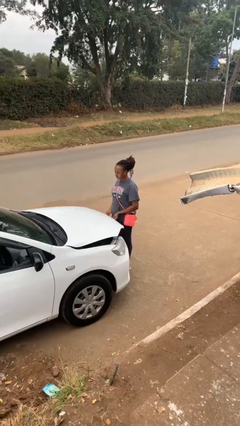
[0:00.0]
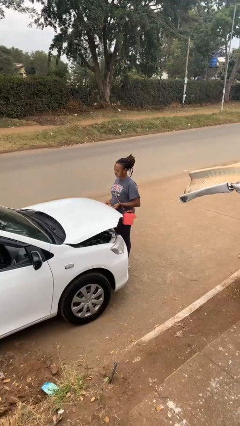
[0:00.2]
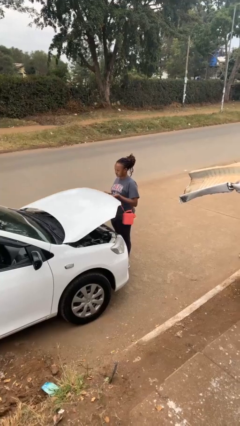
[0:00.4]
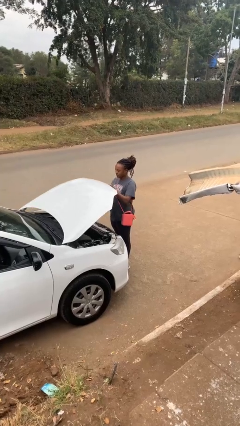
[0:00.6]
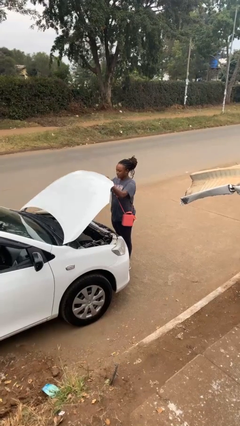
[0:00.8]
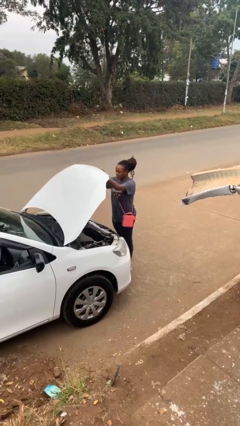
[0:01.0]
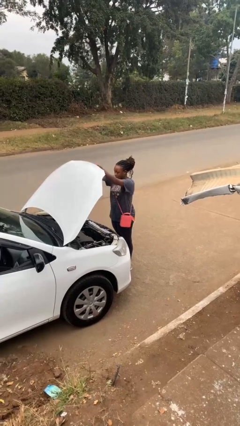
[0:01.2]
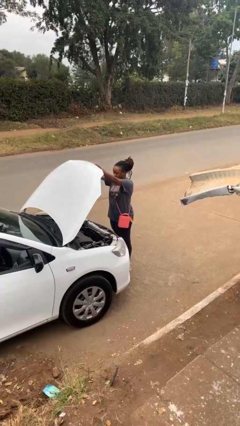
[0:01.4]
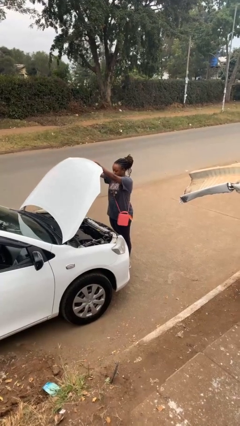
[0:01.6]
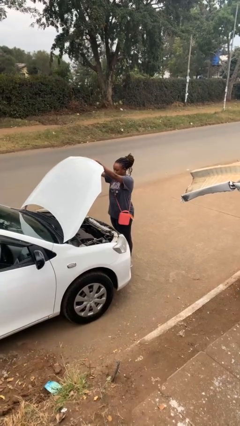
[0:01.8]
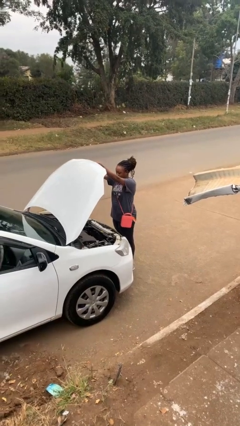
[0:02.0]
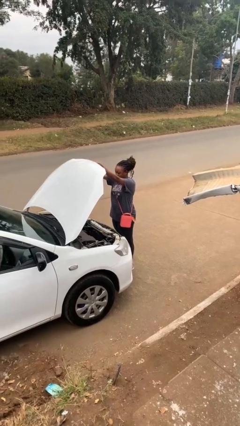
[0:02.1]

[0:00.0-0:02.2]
person opens car hood

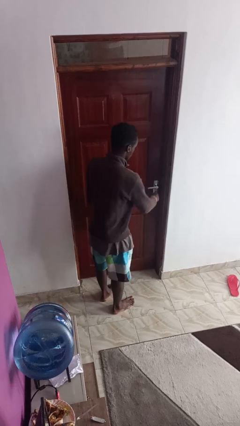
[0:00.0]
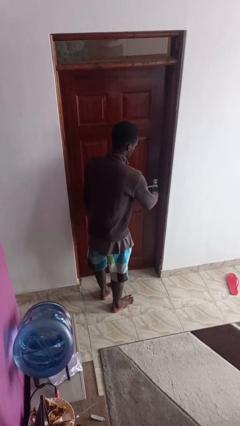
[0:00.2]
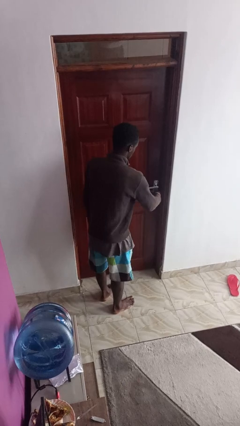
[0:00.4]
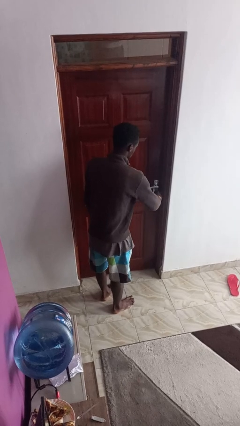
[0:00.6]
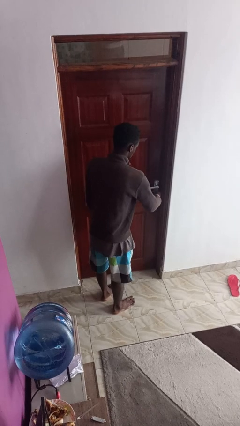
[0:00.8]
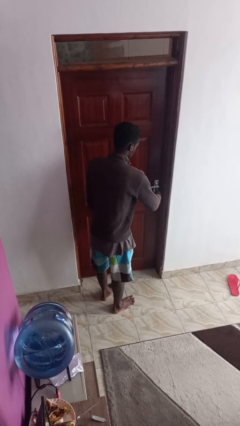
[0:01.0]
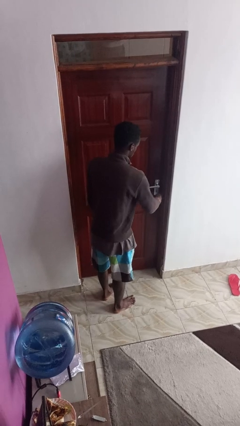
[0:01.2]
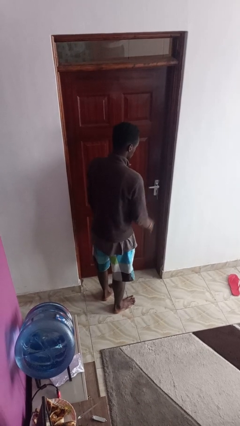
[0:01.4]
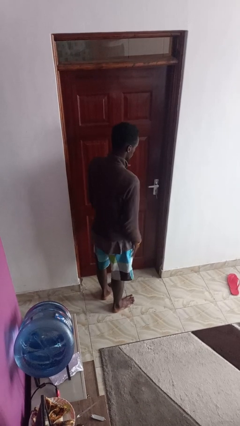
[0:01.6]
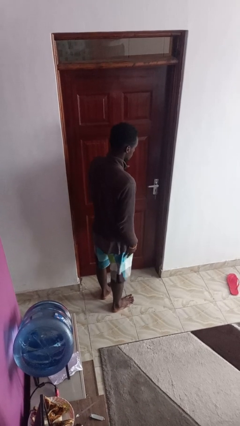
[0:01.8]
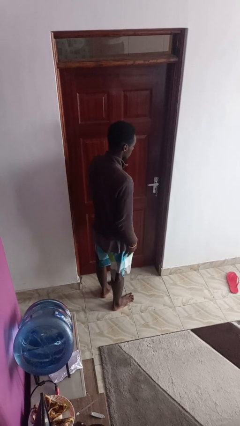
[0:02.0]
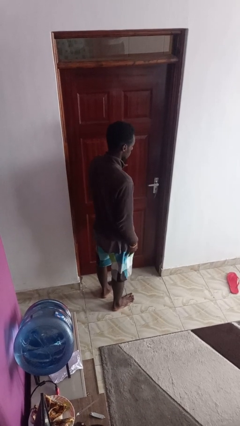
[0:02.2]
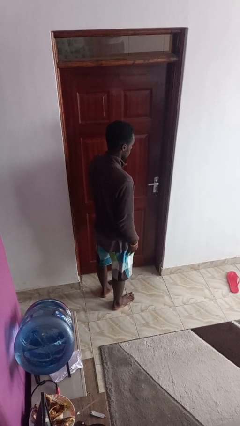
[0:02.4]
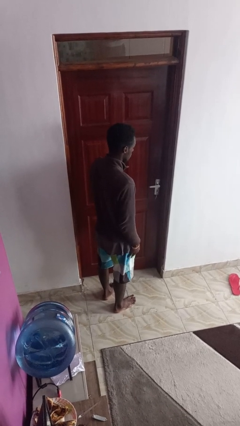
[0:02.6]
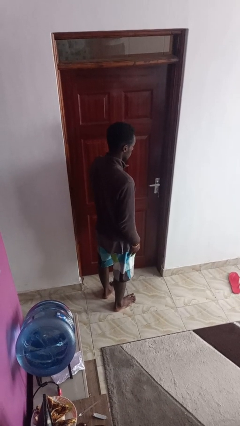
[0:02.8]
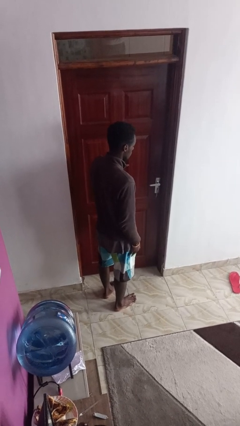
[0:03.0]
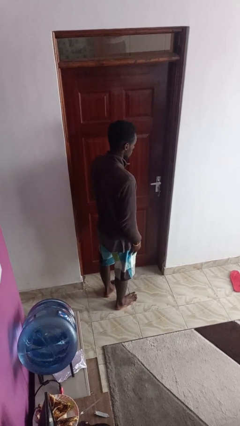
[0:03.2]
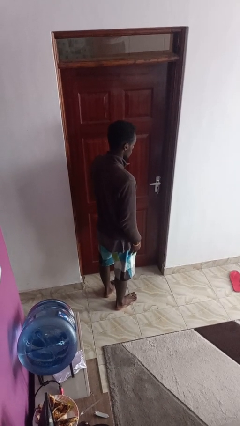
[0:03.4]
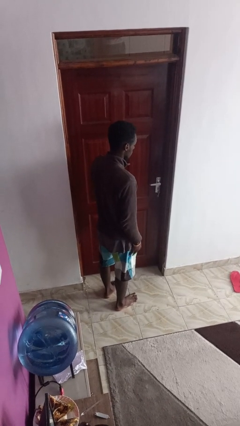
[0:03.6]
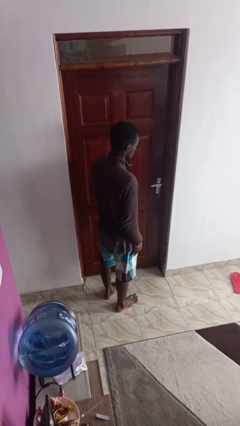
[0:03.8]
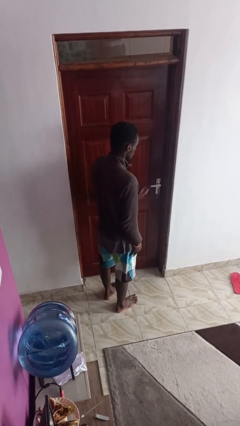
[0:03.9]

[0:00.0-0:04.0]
person unlocks door with keys

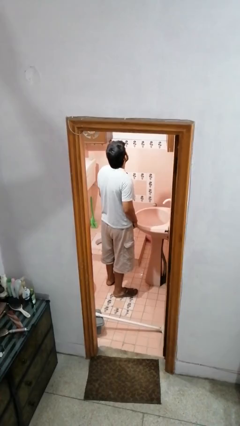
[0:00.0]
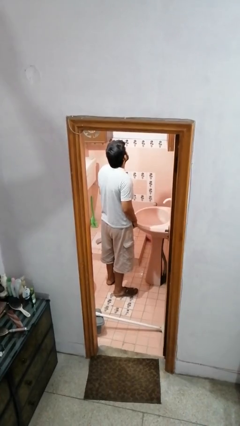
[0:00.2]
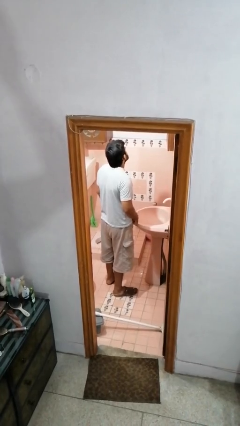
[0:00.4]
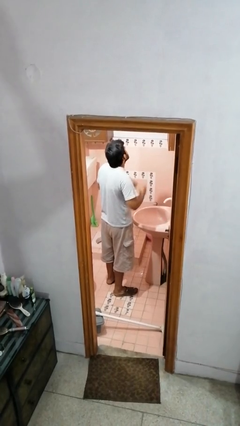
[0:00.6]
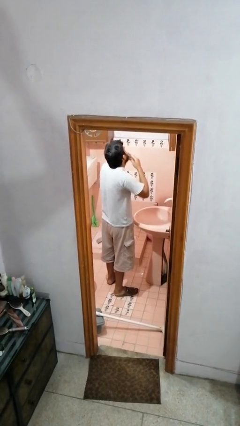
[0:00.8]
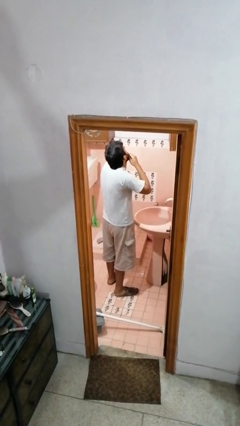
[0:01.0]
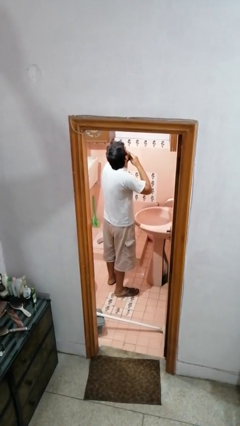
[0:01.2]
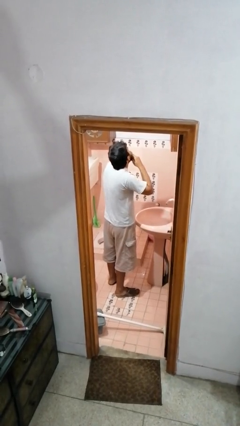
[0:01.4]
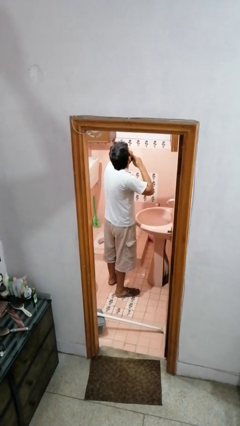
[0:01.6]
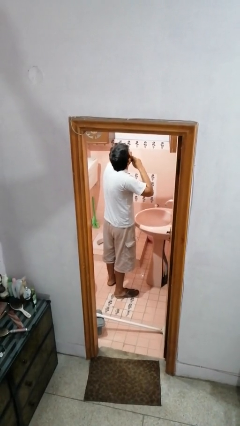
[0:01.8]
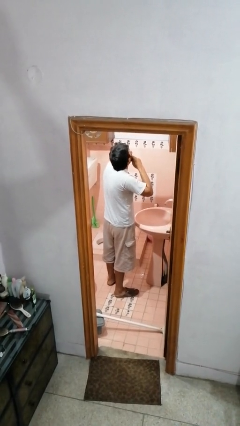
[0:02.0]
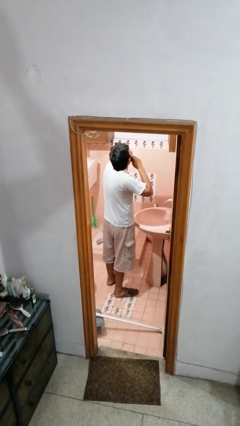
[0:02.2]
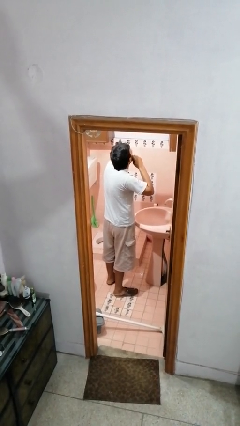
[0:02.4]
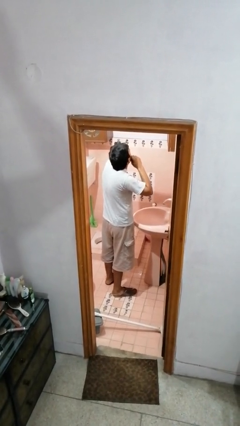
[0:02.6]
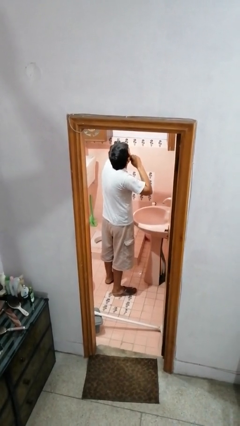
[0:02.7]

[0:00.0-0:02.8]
person flosses

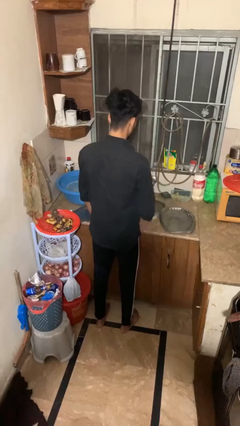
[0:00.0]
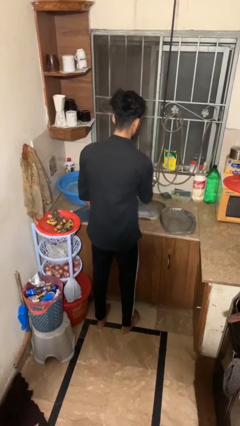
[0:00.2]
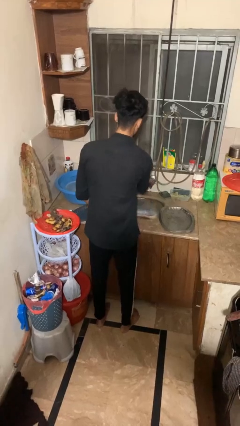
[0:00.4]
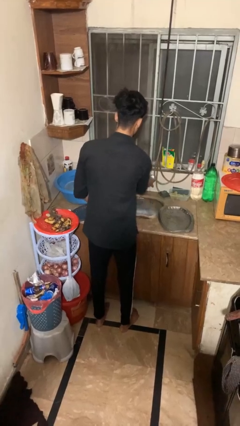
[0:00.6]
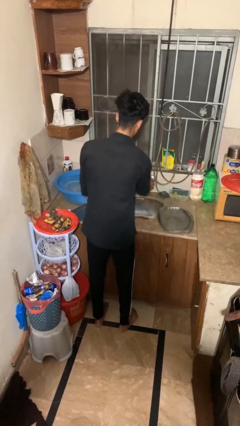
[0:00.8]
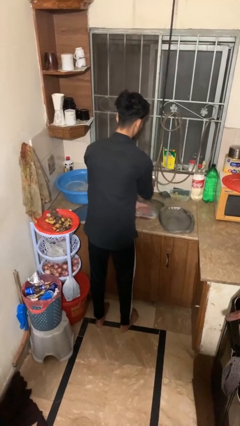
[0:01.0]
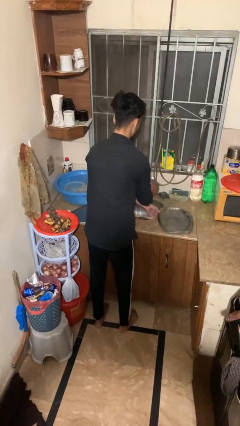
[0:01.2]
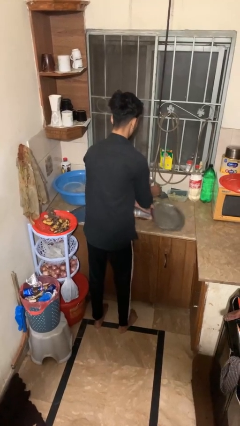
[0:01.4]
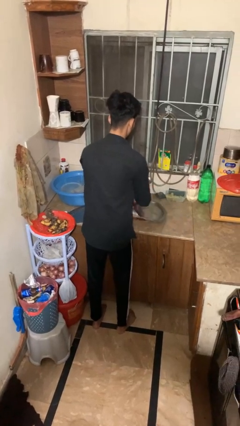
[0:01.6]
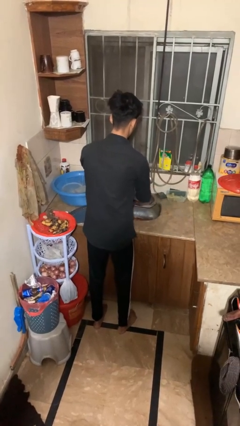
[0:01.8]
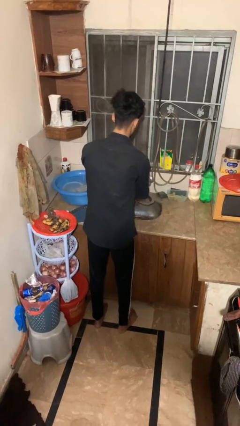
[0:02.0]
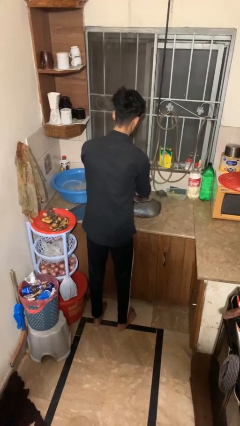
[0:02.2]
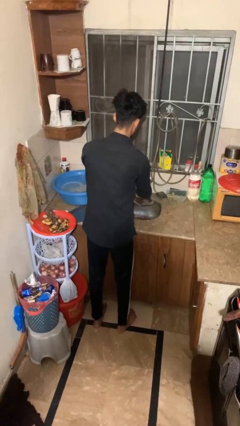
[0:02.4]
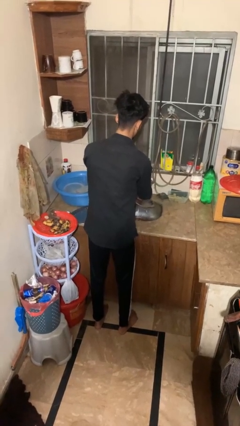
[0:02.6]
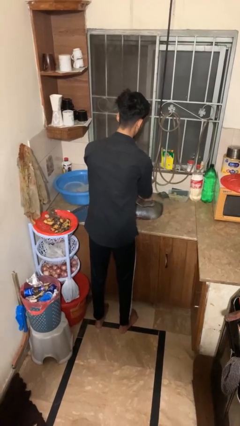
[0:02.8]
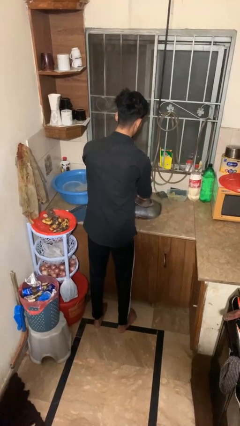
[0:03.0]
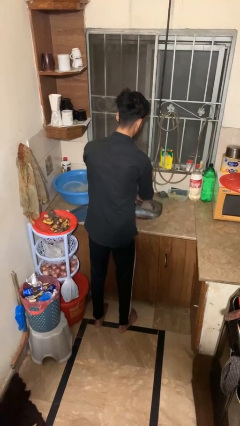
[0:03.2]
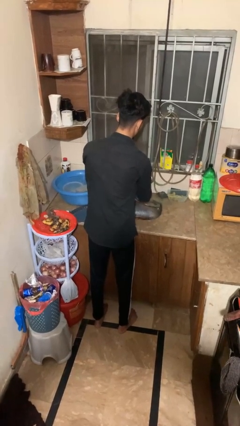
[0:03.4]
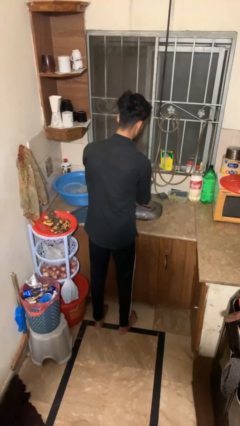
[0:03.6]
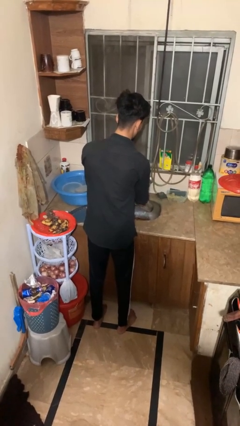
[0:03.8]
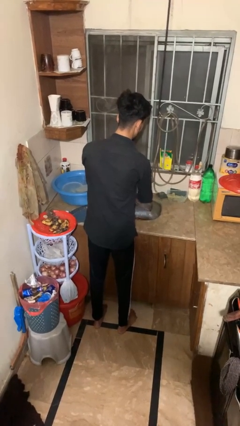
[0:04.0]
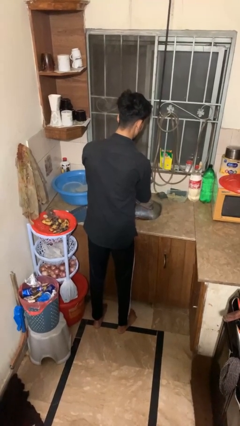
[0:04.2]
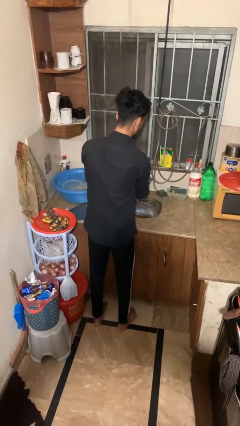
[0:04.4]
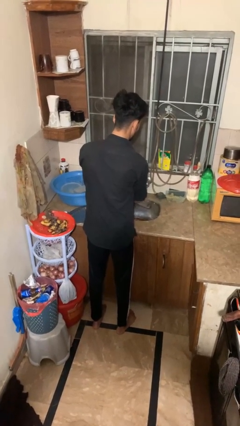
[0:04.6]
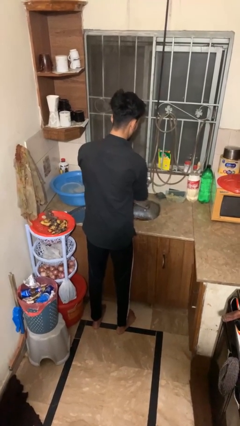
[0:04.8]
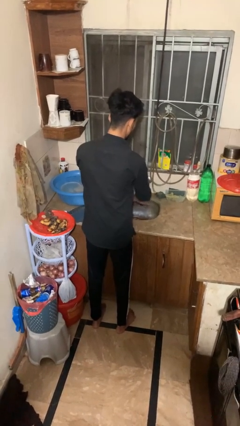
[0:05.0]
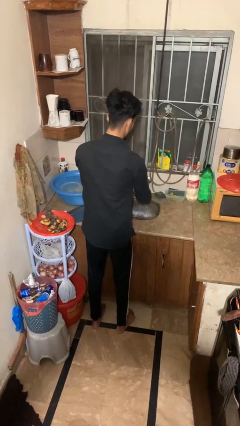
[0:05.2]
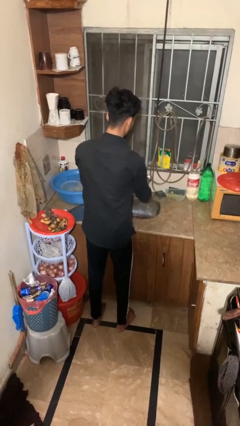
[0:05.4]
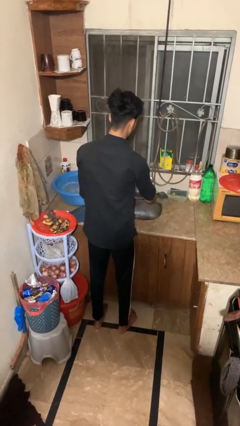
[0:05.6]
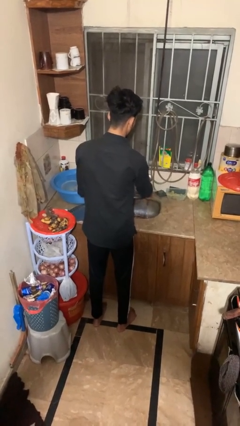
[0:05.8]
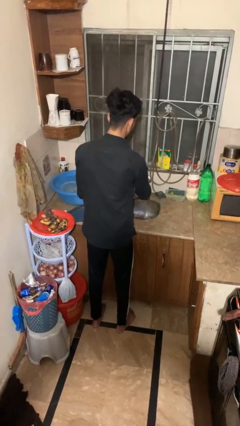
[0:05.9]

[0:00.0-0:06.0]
person opens dishwasher

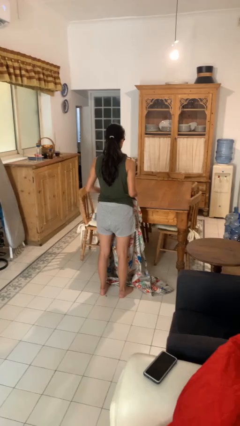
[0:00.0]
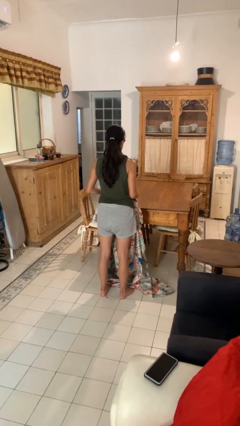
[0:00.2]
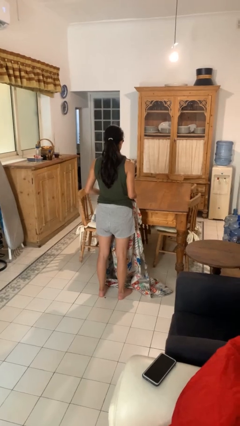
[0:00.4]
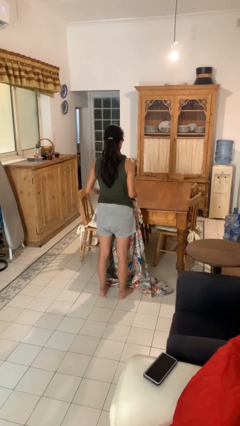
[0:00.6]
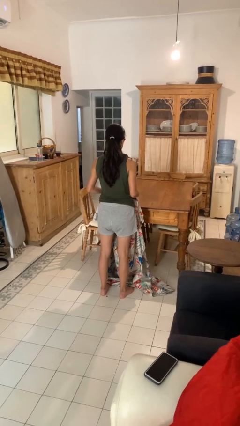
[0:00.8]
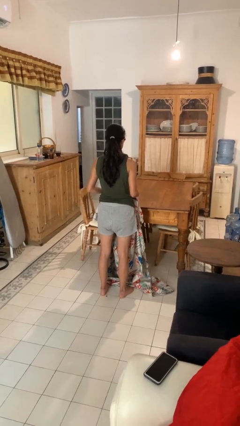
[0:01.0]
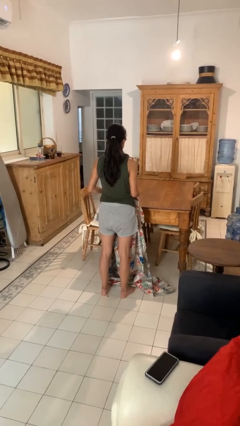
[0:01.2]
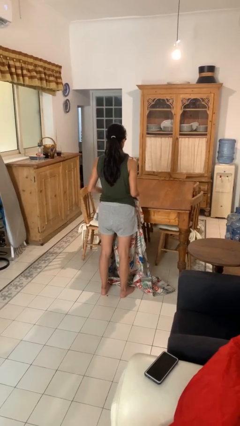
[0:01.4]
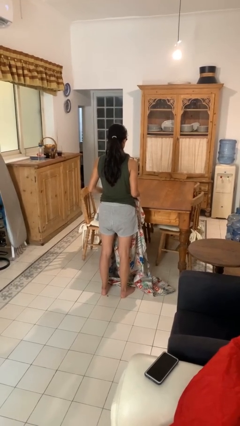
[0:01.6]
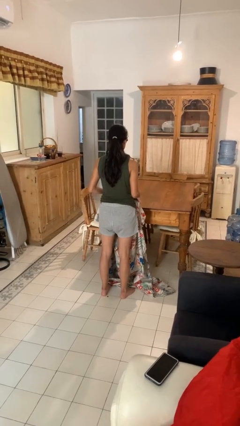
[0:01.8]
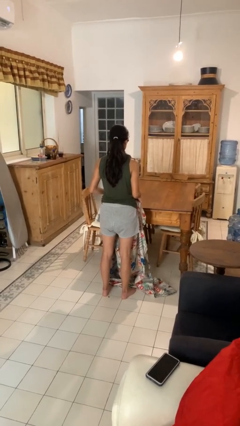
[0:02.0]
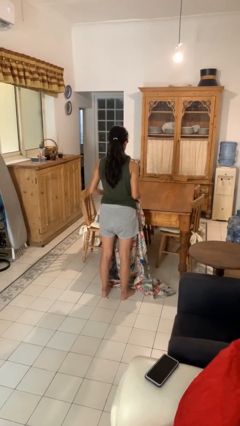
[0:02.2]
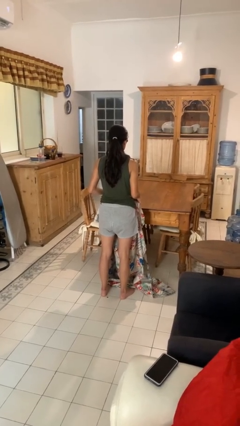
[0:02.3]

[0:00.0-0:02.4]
person spreads tablecloth
